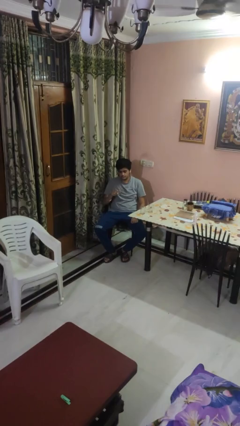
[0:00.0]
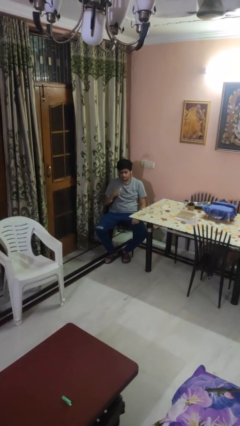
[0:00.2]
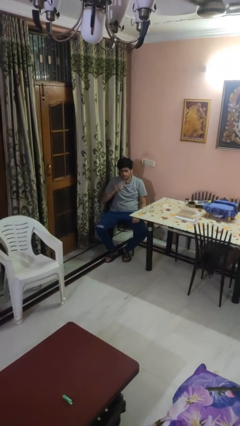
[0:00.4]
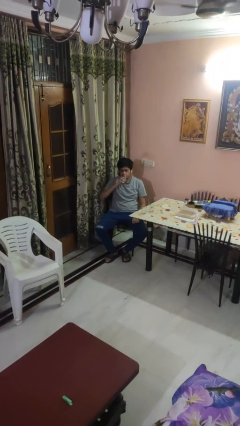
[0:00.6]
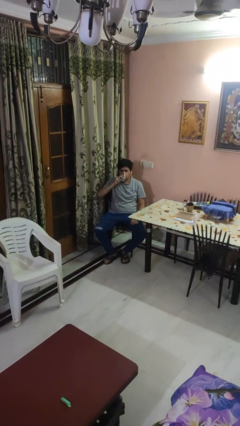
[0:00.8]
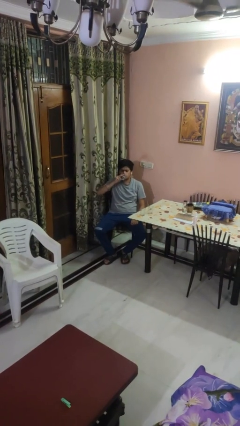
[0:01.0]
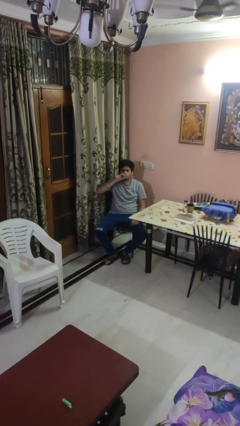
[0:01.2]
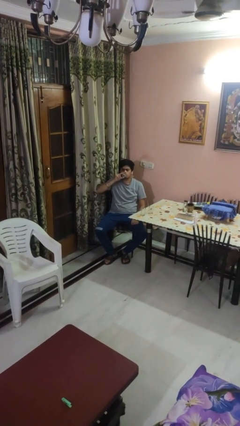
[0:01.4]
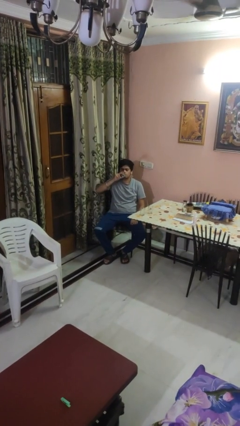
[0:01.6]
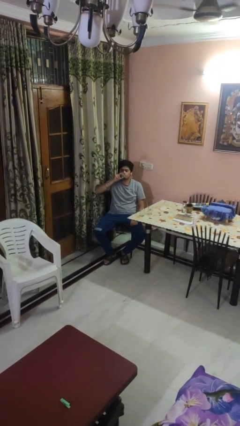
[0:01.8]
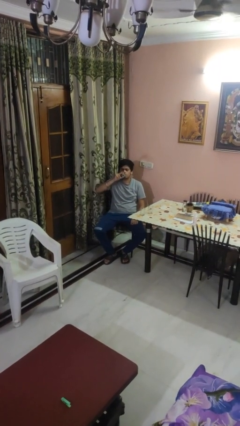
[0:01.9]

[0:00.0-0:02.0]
person drinks from shotglass

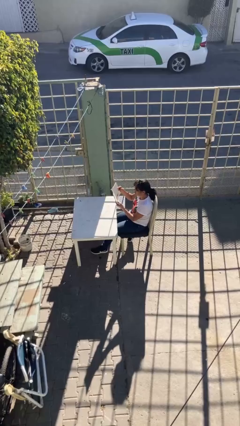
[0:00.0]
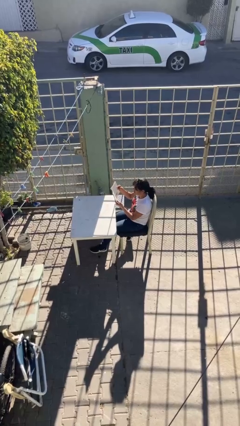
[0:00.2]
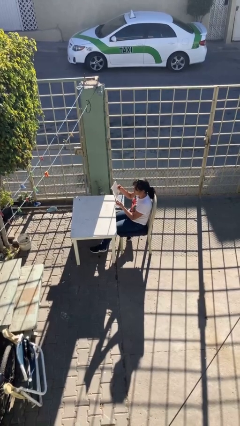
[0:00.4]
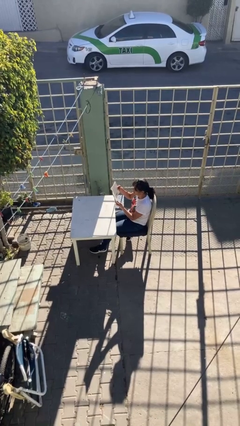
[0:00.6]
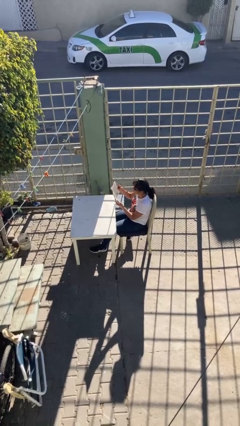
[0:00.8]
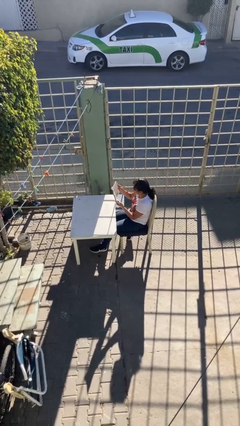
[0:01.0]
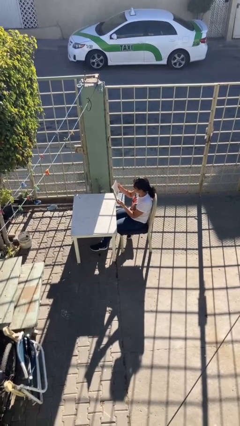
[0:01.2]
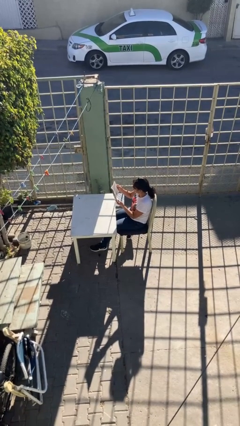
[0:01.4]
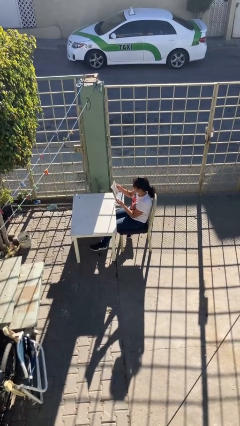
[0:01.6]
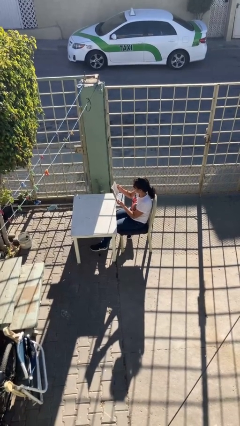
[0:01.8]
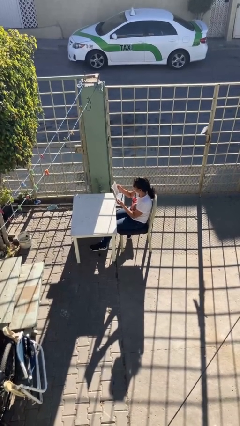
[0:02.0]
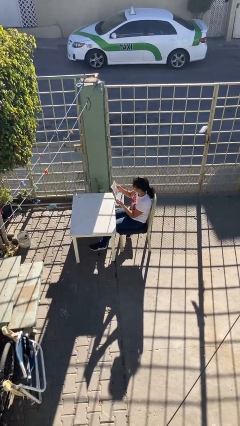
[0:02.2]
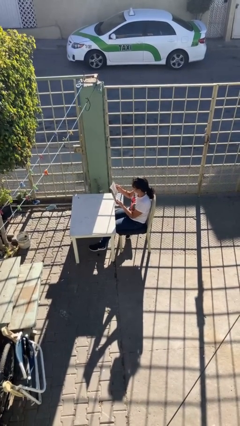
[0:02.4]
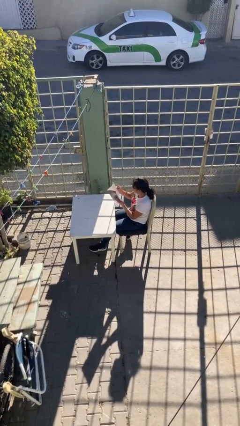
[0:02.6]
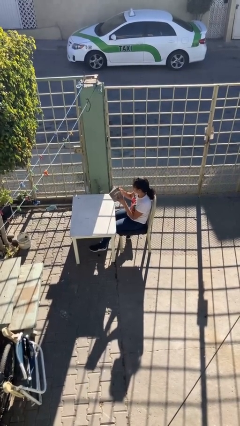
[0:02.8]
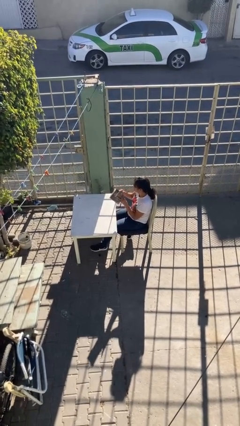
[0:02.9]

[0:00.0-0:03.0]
person reads document

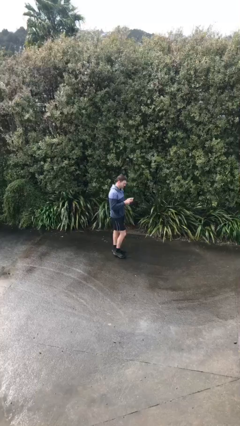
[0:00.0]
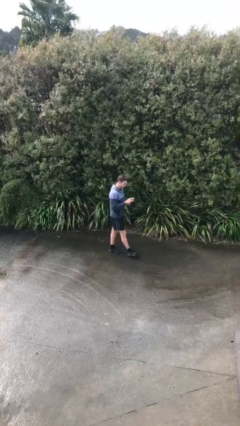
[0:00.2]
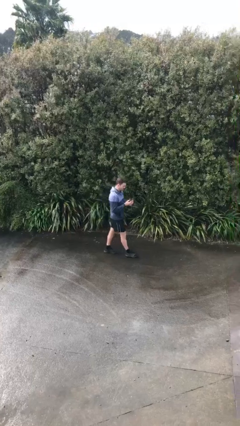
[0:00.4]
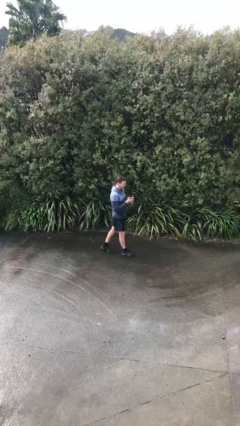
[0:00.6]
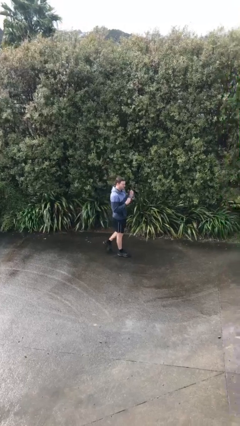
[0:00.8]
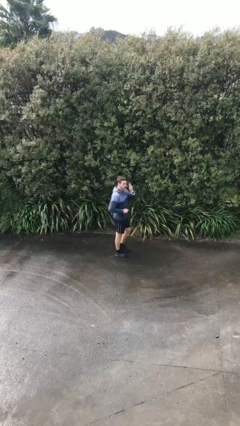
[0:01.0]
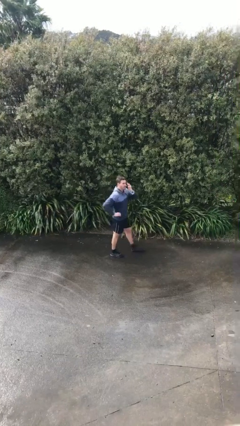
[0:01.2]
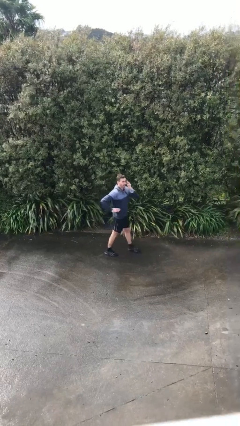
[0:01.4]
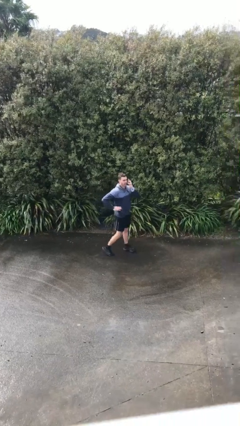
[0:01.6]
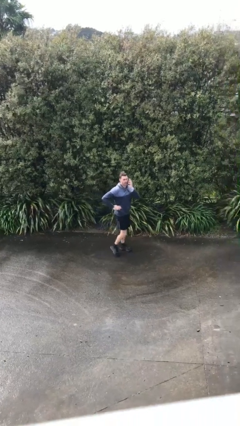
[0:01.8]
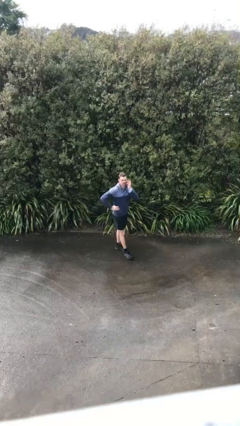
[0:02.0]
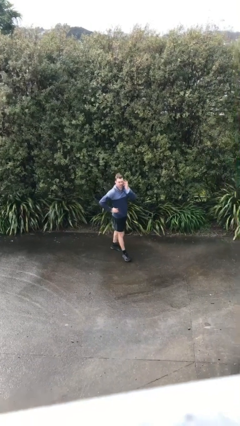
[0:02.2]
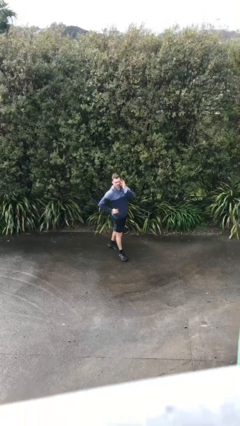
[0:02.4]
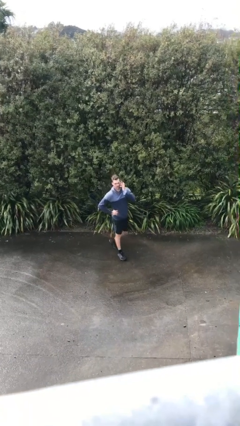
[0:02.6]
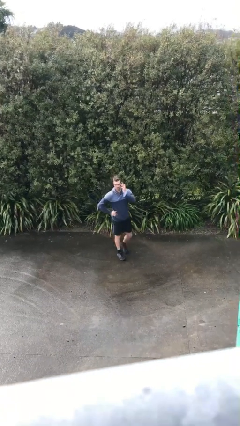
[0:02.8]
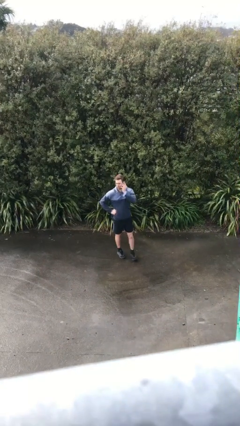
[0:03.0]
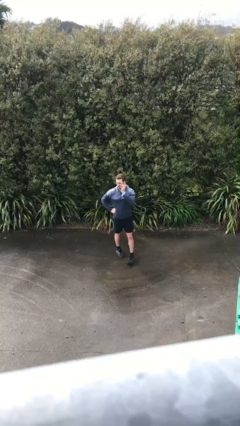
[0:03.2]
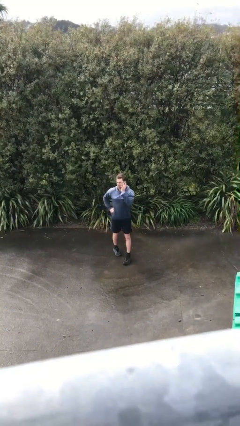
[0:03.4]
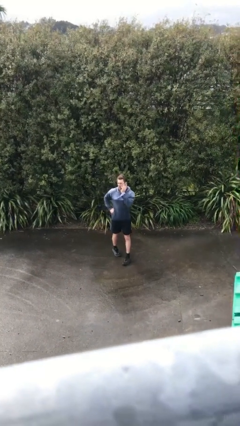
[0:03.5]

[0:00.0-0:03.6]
person talks on phone

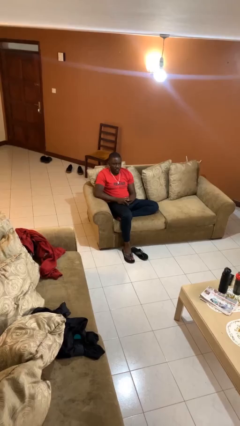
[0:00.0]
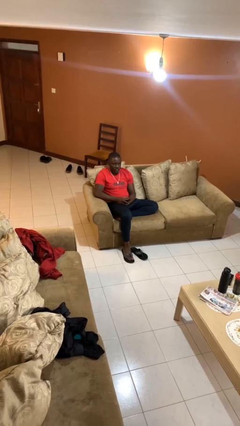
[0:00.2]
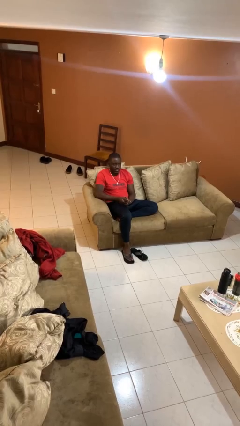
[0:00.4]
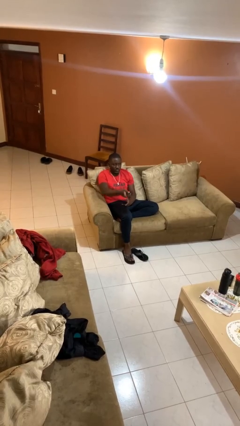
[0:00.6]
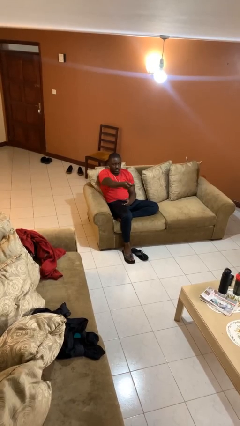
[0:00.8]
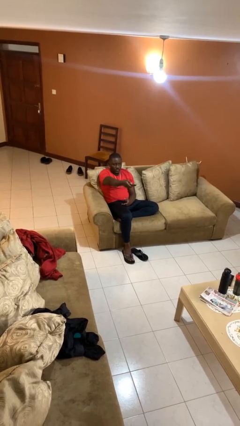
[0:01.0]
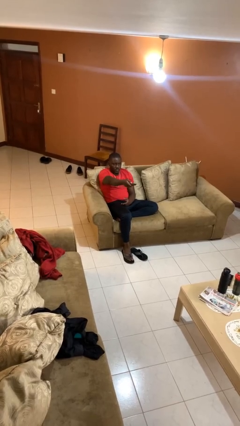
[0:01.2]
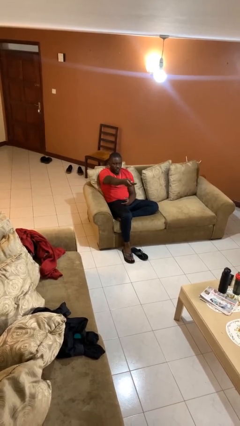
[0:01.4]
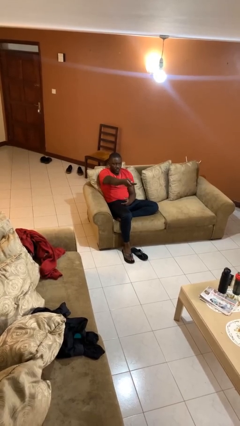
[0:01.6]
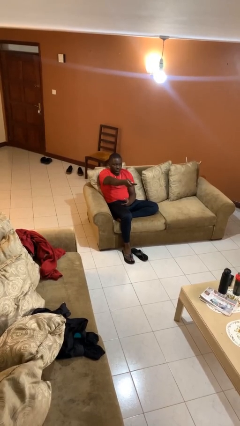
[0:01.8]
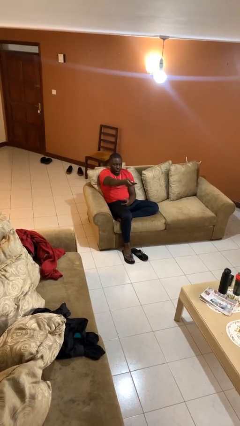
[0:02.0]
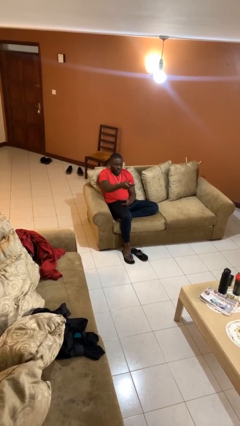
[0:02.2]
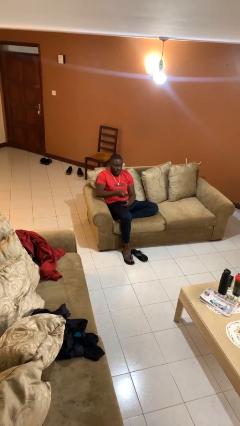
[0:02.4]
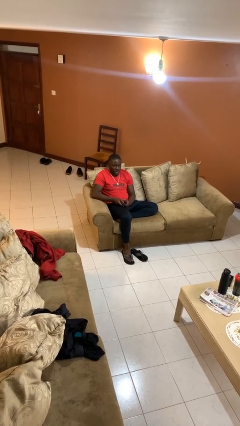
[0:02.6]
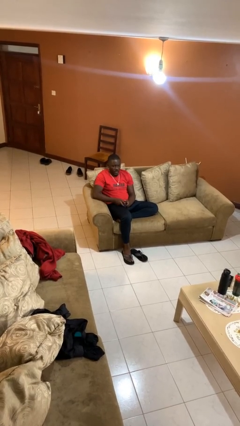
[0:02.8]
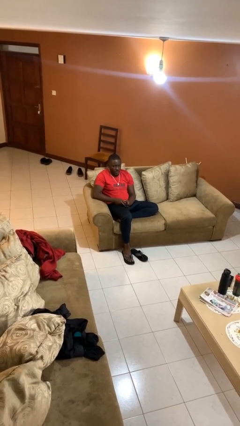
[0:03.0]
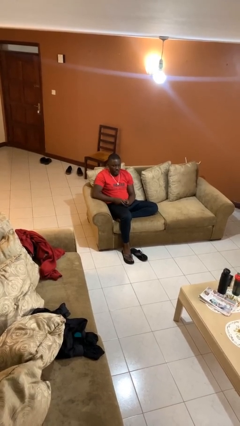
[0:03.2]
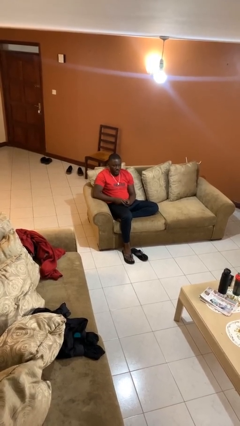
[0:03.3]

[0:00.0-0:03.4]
person uses television remote

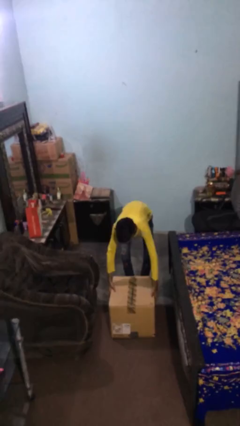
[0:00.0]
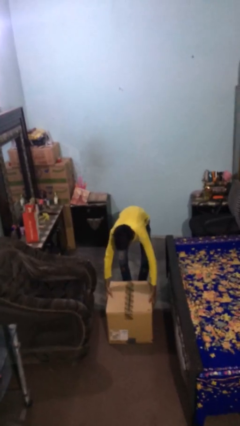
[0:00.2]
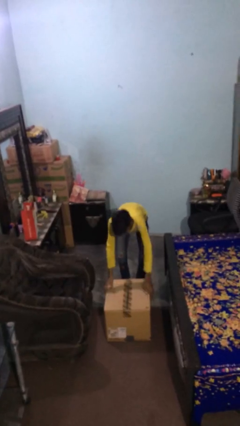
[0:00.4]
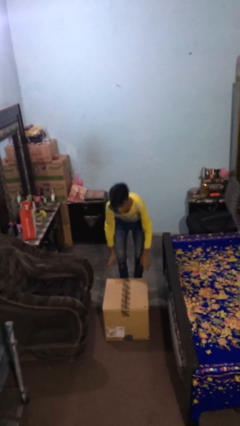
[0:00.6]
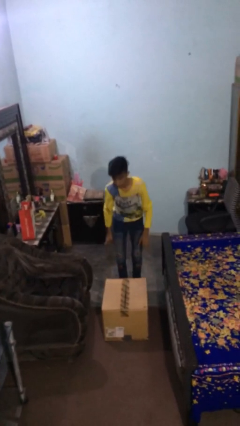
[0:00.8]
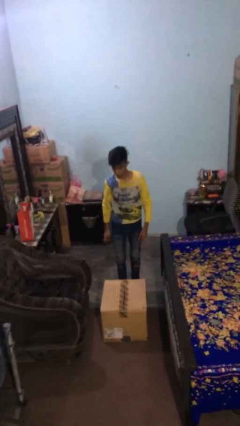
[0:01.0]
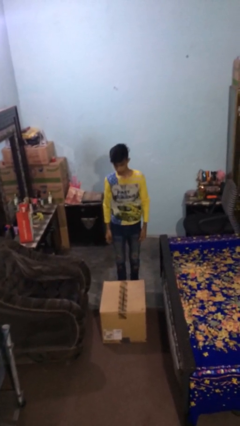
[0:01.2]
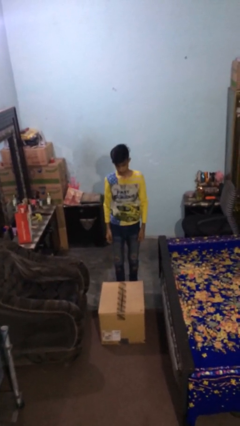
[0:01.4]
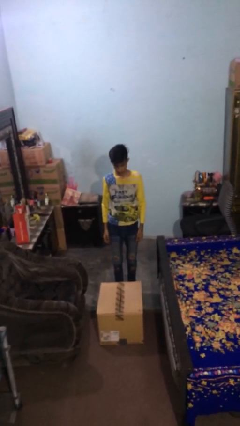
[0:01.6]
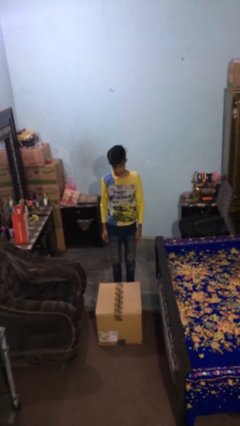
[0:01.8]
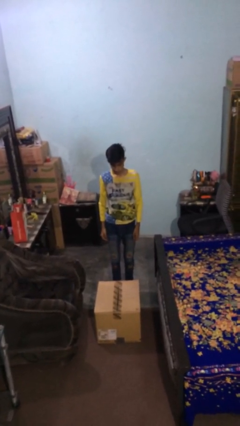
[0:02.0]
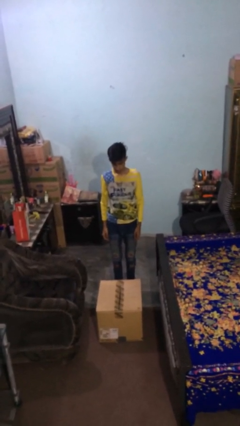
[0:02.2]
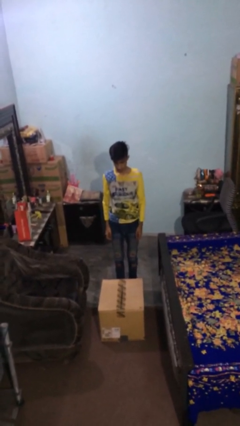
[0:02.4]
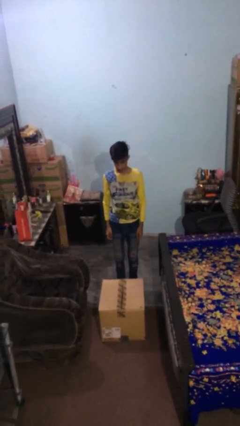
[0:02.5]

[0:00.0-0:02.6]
person puts down object on floor

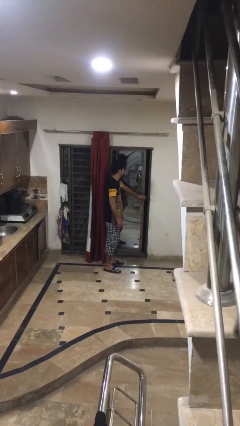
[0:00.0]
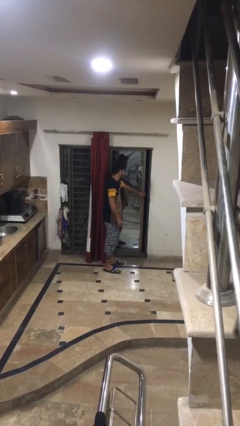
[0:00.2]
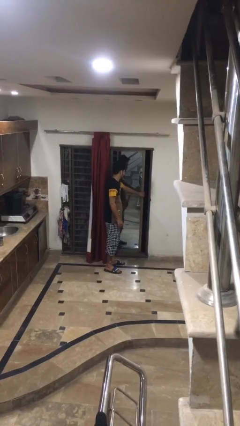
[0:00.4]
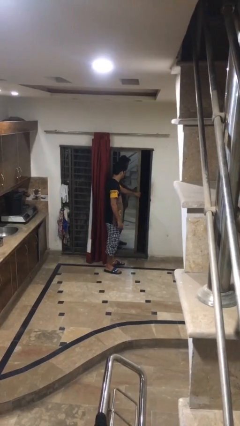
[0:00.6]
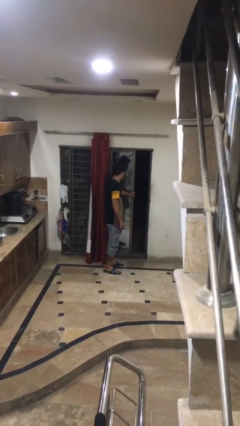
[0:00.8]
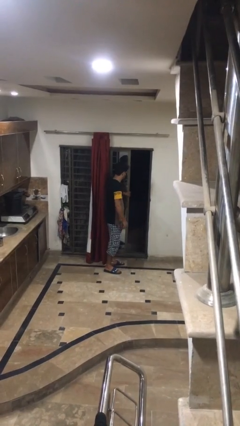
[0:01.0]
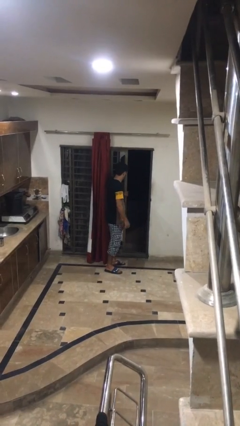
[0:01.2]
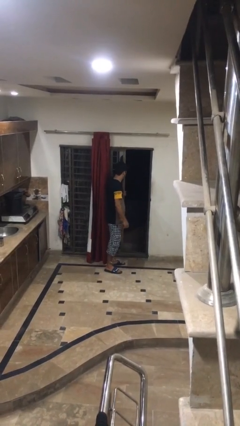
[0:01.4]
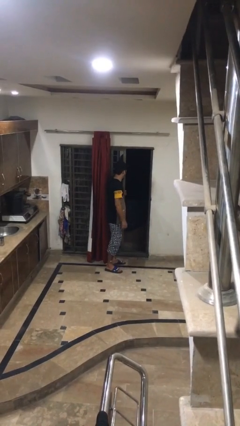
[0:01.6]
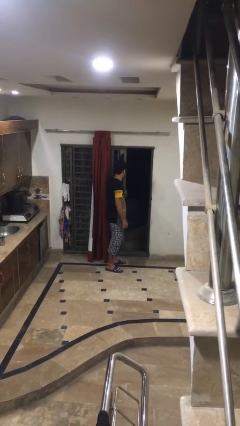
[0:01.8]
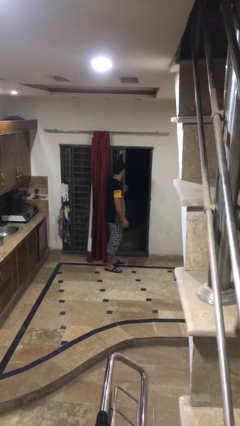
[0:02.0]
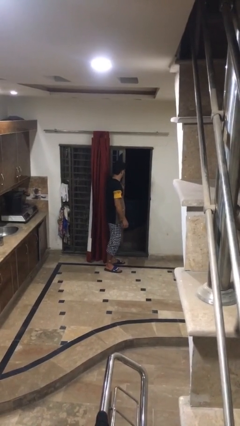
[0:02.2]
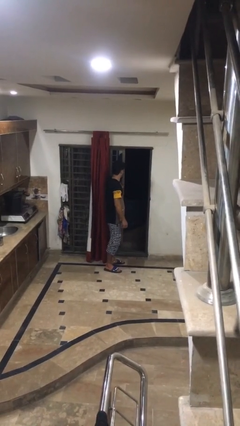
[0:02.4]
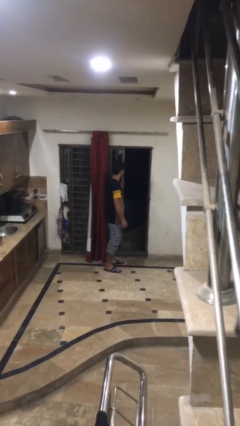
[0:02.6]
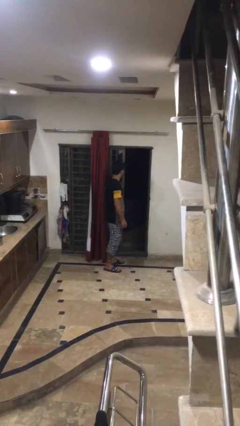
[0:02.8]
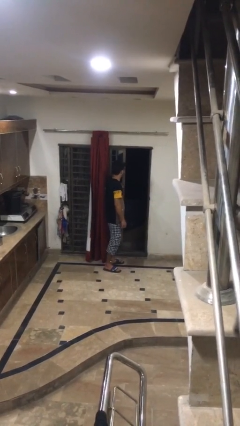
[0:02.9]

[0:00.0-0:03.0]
person opens home window
